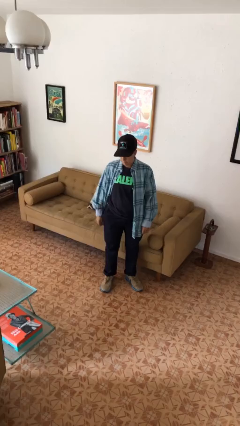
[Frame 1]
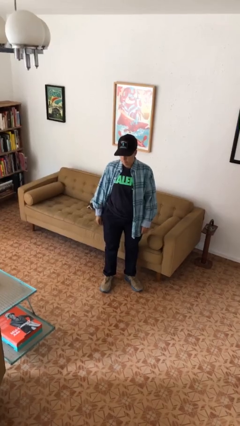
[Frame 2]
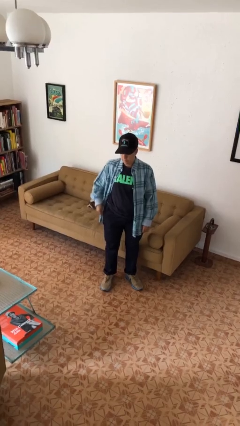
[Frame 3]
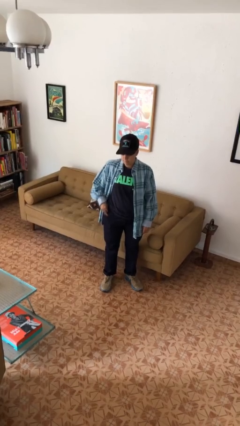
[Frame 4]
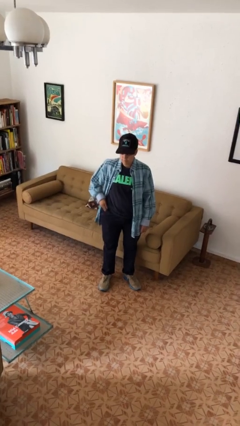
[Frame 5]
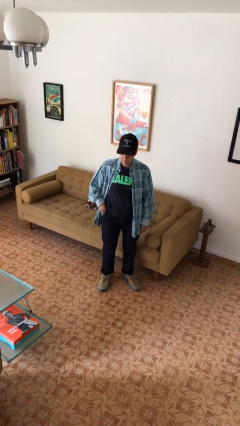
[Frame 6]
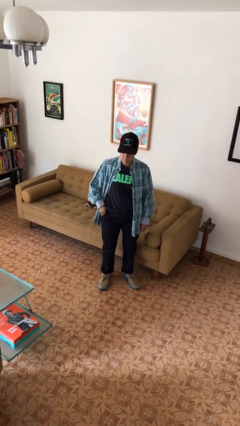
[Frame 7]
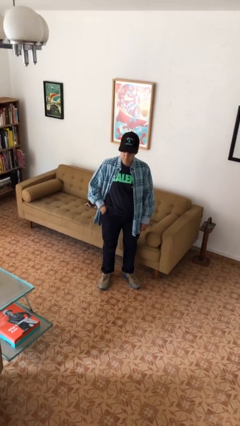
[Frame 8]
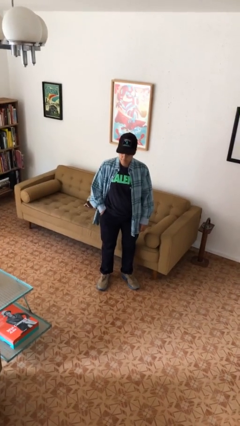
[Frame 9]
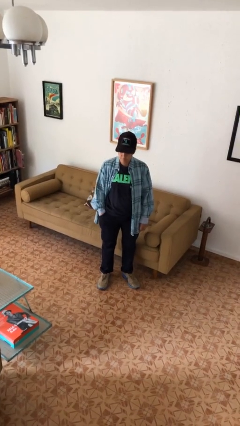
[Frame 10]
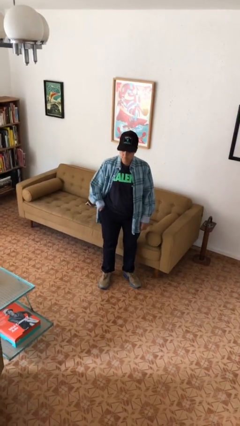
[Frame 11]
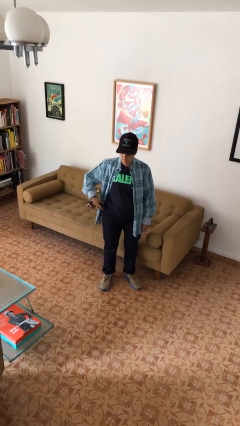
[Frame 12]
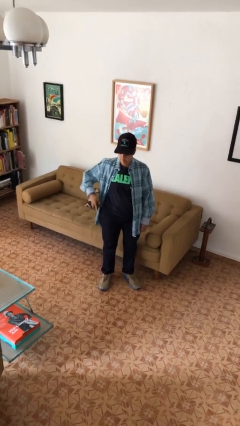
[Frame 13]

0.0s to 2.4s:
person takes phone from pocket

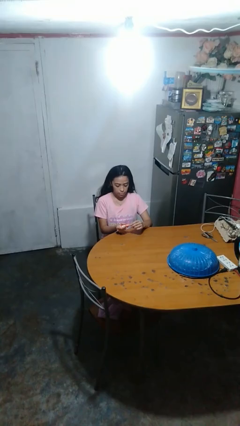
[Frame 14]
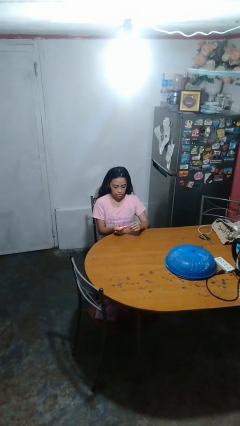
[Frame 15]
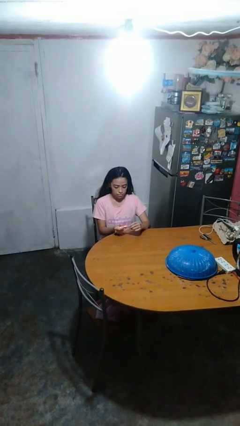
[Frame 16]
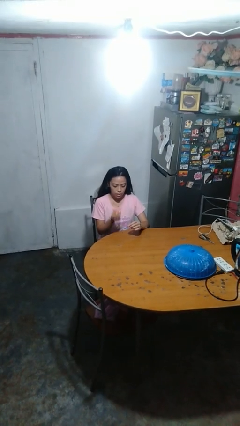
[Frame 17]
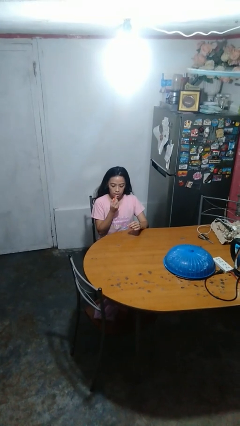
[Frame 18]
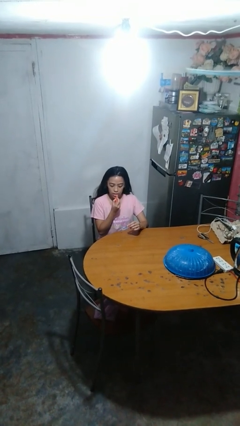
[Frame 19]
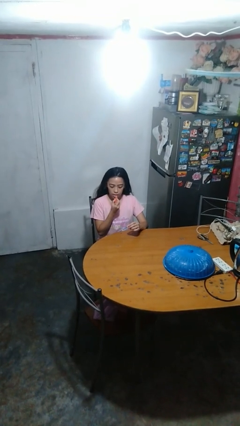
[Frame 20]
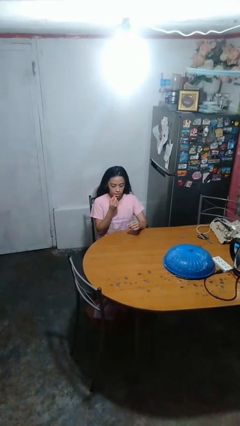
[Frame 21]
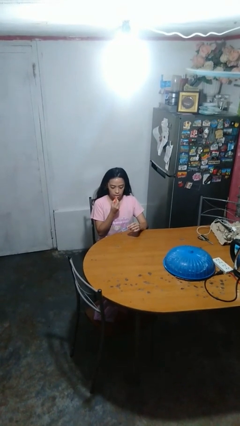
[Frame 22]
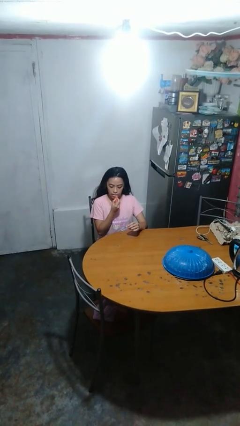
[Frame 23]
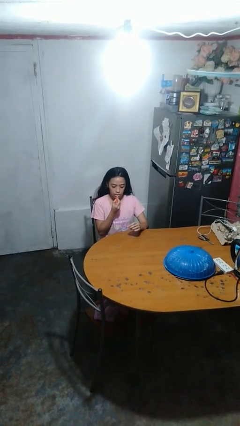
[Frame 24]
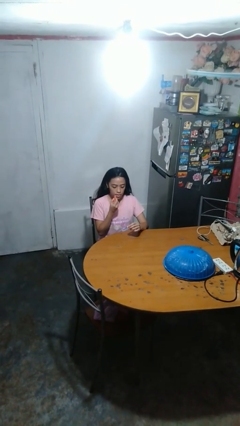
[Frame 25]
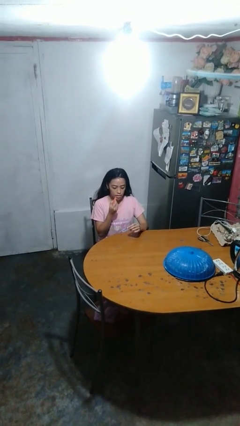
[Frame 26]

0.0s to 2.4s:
person applies lip makeup

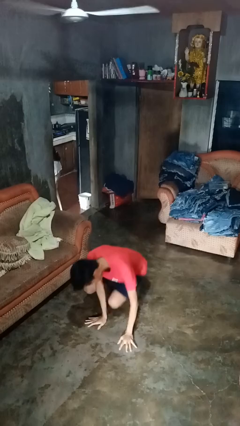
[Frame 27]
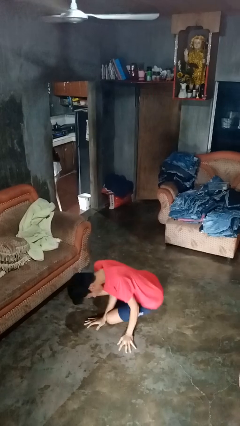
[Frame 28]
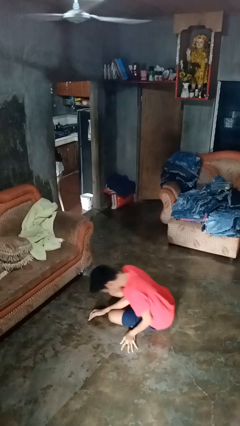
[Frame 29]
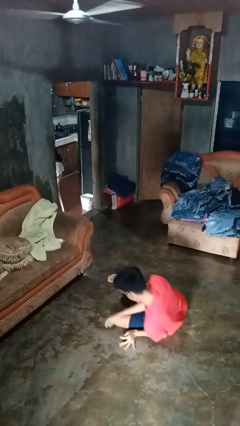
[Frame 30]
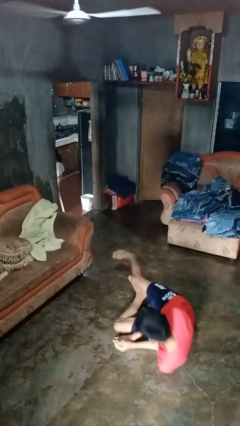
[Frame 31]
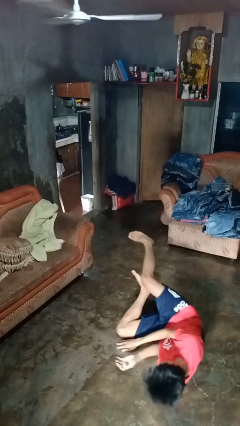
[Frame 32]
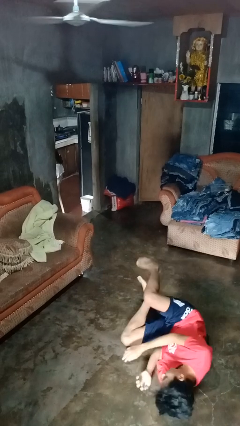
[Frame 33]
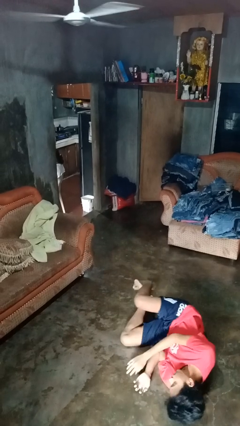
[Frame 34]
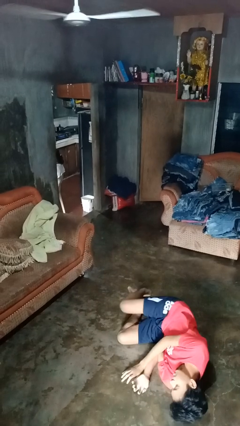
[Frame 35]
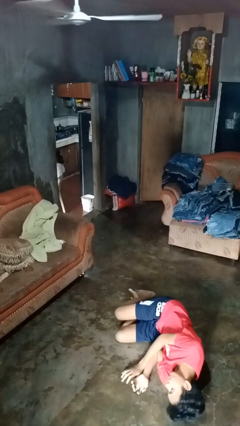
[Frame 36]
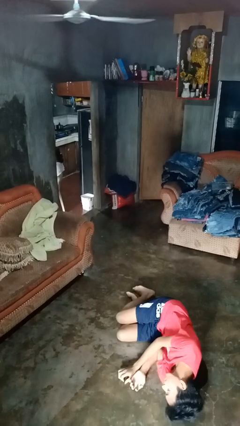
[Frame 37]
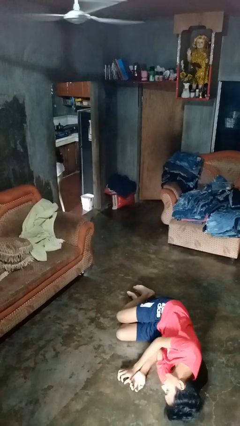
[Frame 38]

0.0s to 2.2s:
person falls while standing

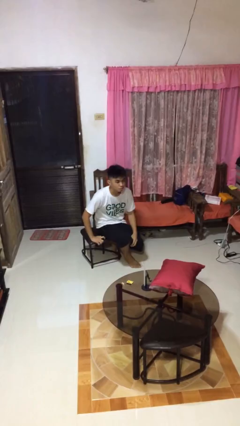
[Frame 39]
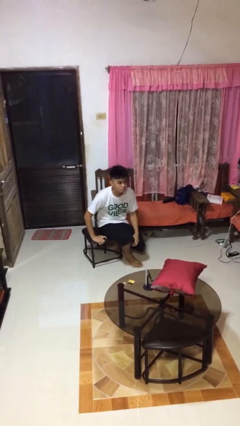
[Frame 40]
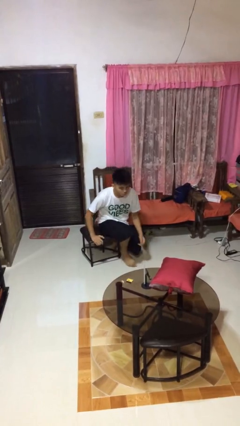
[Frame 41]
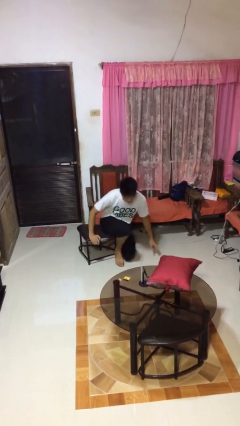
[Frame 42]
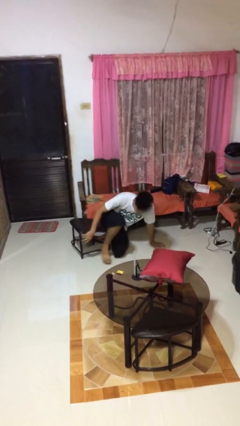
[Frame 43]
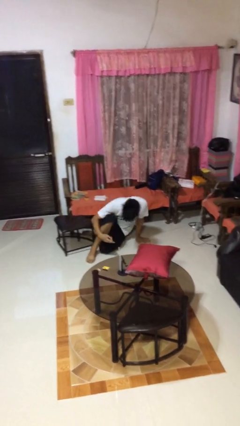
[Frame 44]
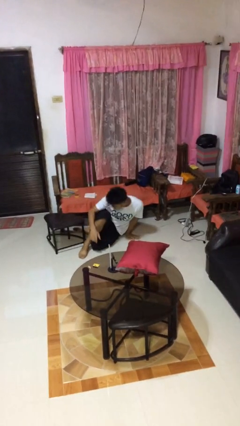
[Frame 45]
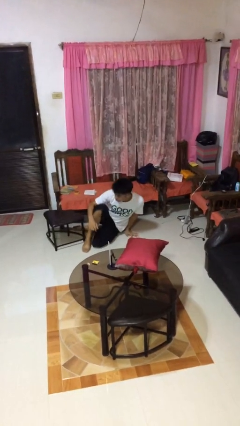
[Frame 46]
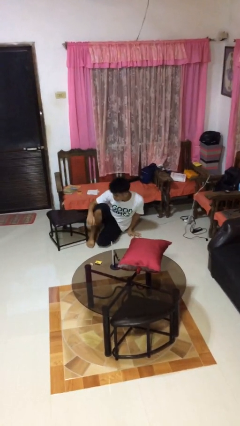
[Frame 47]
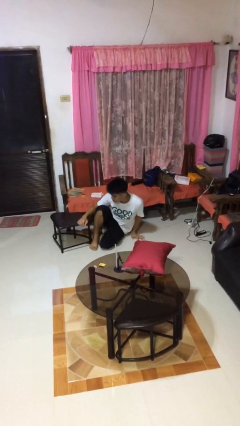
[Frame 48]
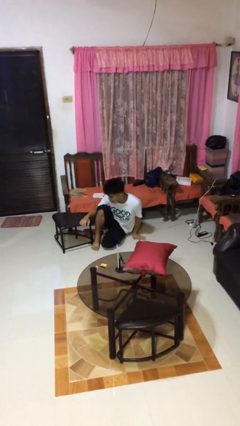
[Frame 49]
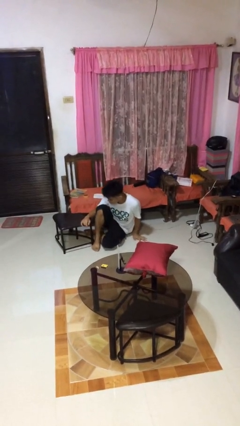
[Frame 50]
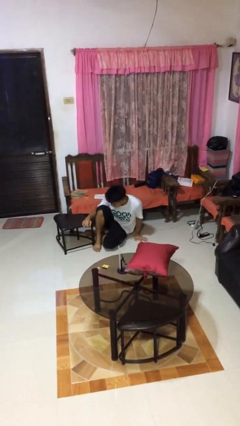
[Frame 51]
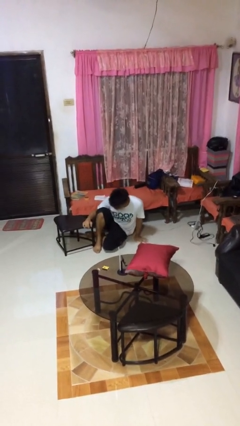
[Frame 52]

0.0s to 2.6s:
person falls from chair

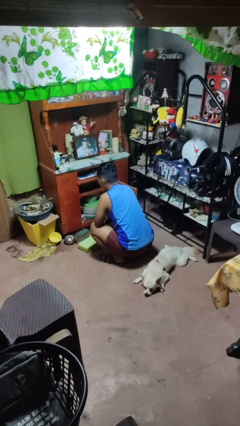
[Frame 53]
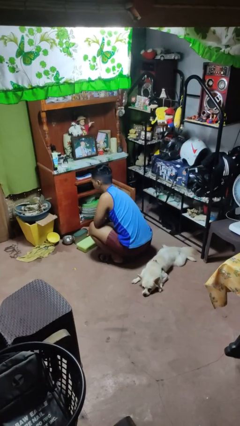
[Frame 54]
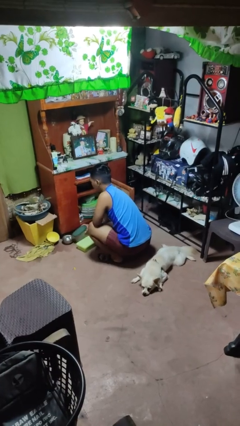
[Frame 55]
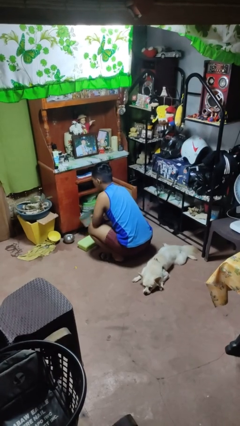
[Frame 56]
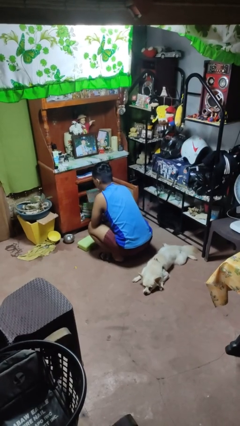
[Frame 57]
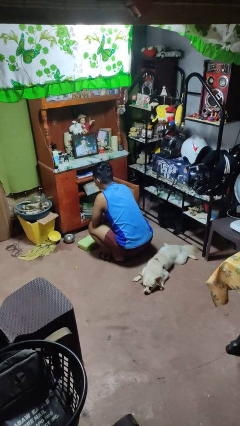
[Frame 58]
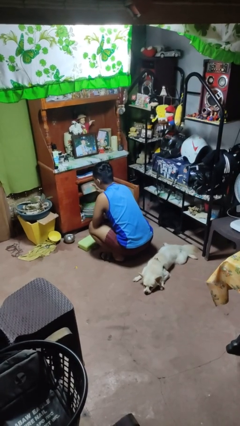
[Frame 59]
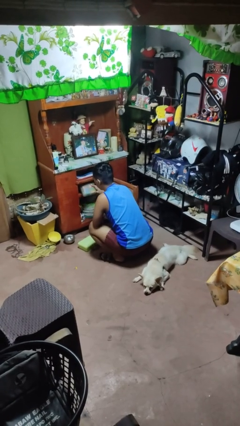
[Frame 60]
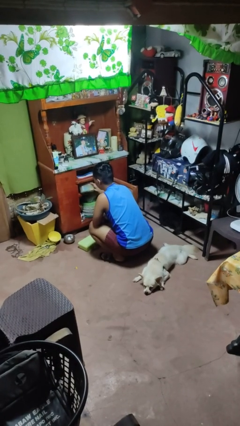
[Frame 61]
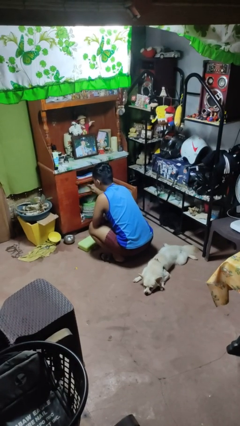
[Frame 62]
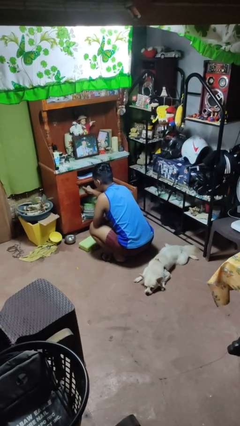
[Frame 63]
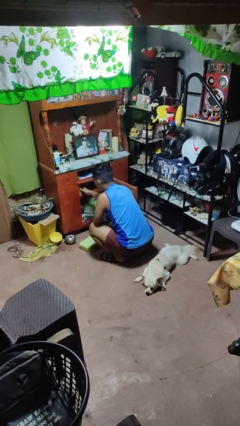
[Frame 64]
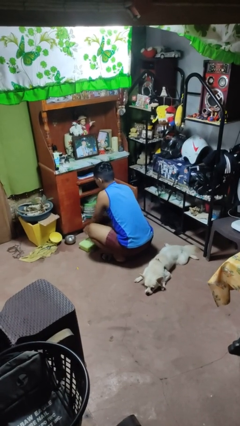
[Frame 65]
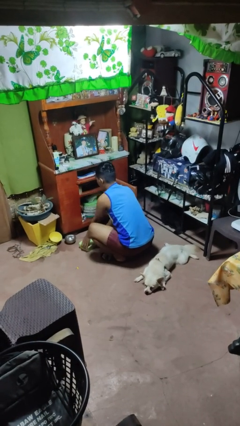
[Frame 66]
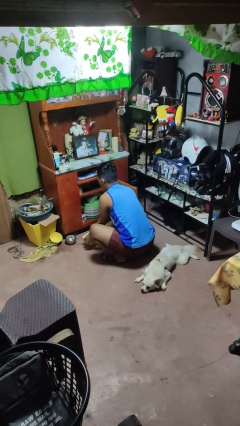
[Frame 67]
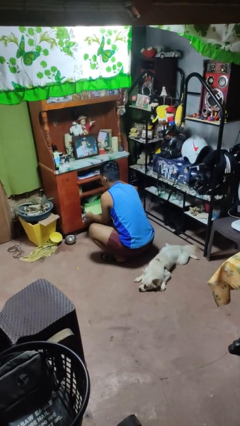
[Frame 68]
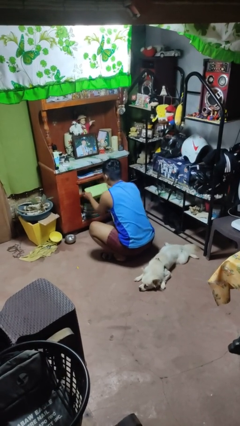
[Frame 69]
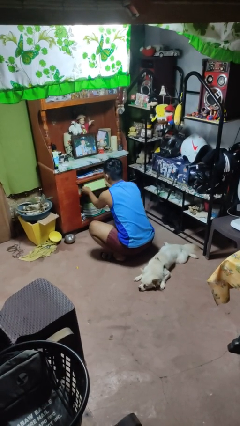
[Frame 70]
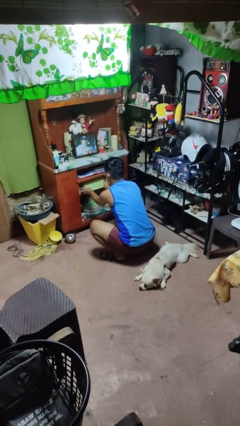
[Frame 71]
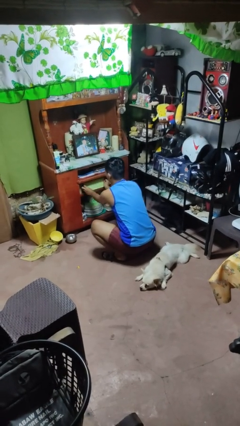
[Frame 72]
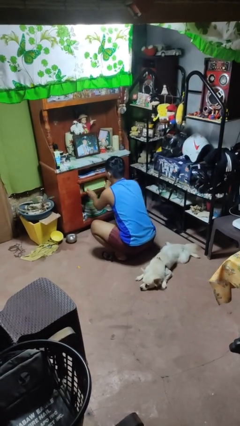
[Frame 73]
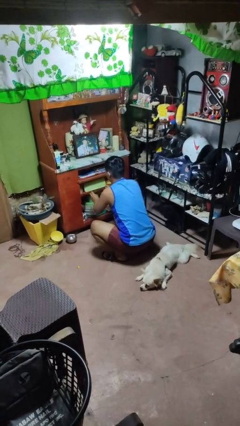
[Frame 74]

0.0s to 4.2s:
person puts object in cabinet

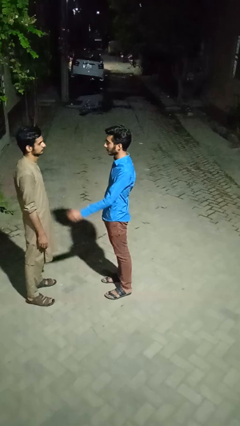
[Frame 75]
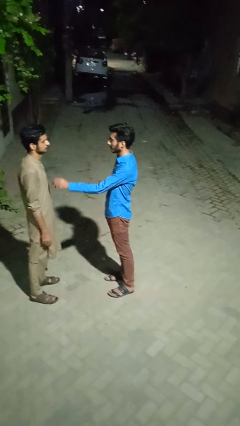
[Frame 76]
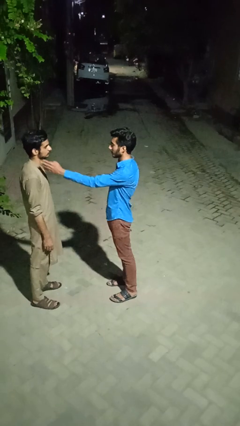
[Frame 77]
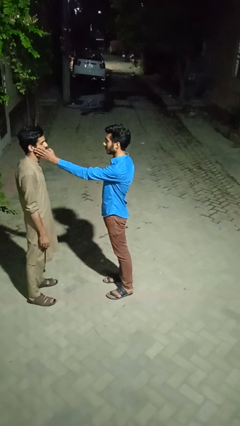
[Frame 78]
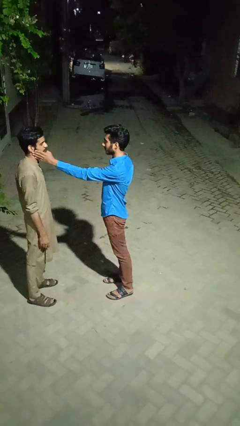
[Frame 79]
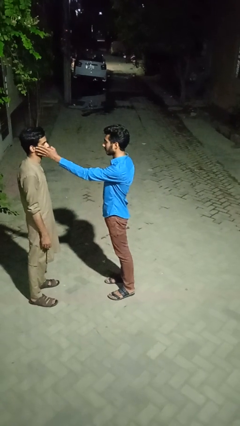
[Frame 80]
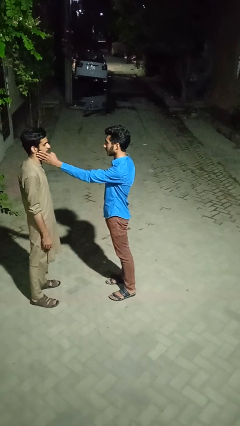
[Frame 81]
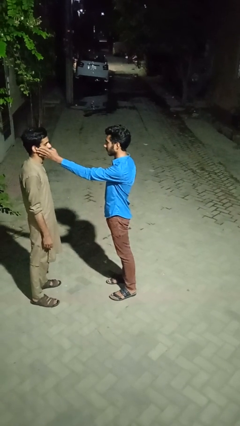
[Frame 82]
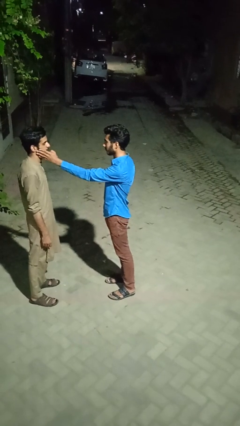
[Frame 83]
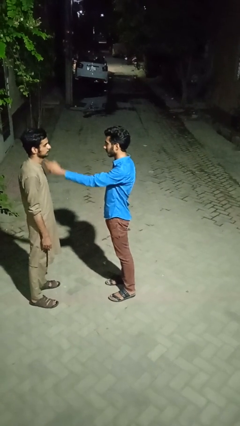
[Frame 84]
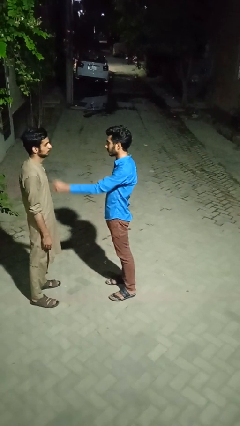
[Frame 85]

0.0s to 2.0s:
person touches face of person

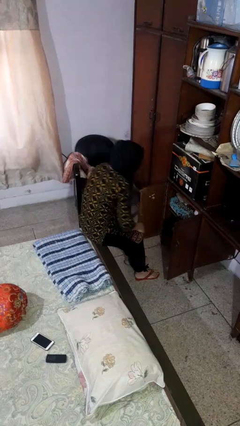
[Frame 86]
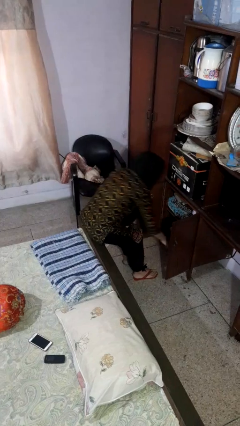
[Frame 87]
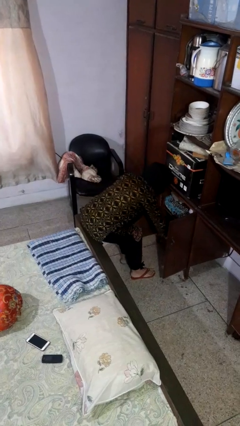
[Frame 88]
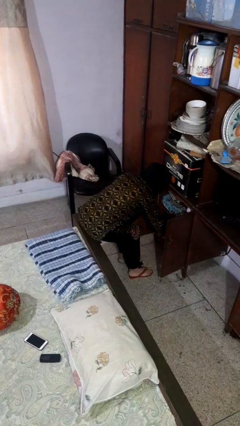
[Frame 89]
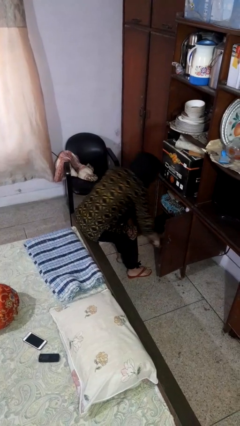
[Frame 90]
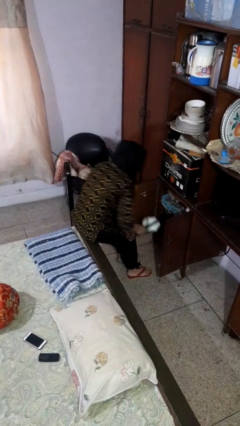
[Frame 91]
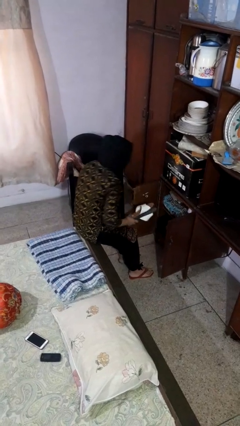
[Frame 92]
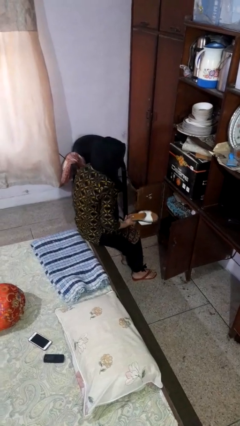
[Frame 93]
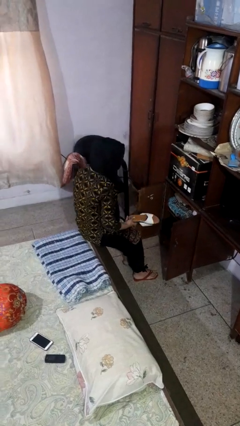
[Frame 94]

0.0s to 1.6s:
person takes object from cabinet
